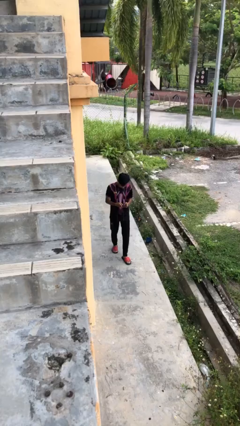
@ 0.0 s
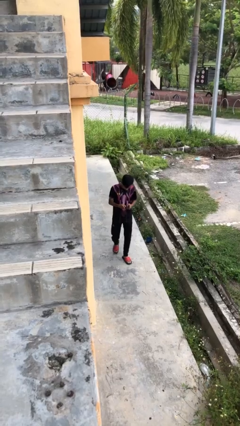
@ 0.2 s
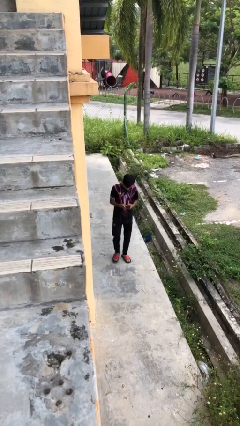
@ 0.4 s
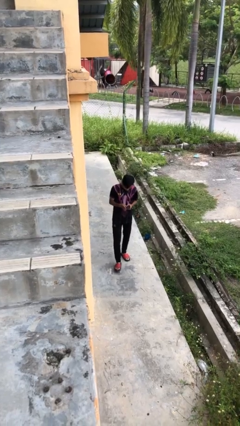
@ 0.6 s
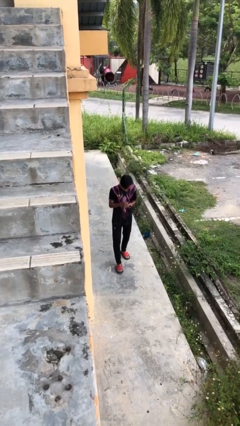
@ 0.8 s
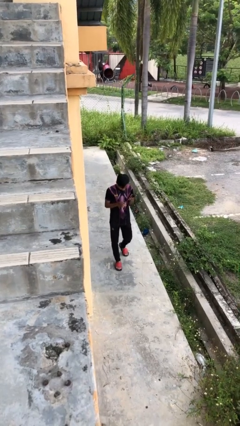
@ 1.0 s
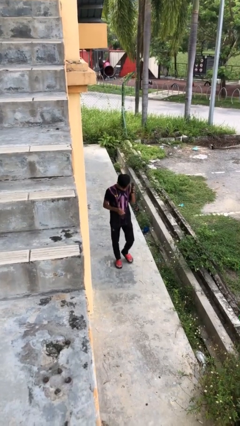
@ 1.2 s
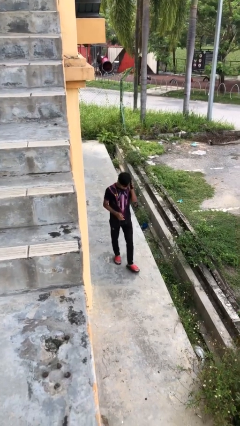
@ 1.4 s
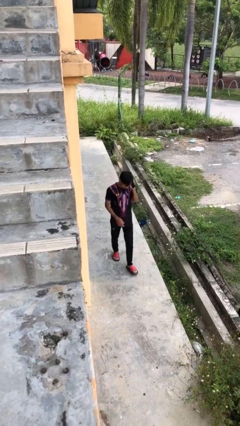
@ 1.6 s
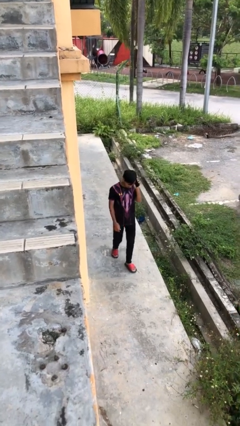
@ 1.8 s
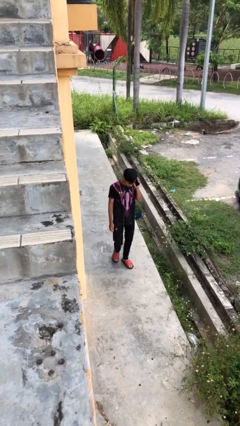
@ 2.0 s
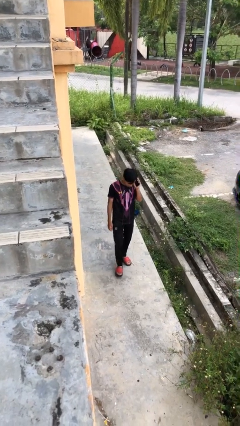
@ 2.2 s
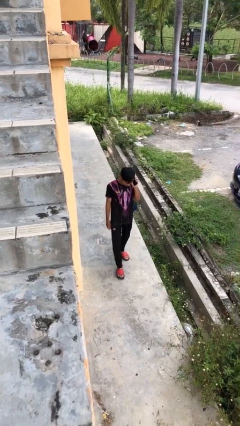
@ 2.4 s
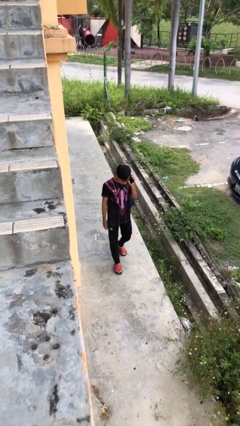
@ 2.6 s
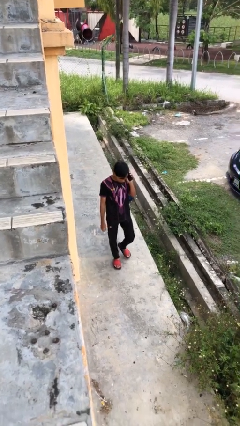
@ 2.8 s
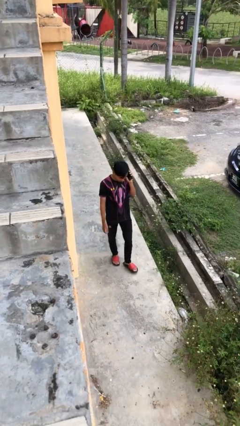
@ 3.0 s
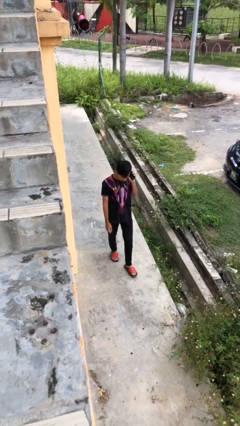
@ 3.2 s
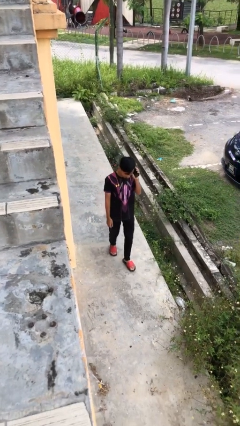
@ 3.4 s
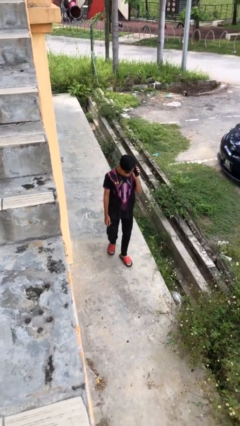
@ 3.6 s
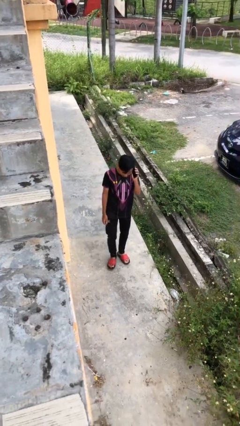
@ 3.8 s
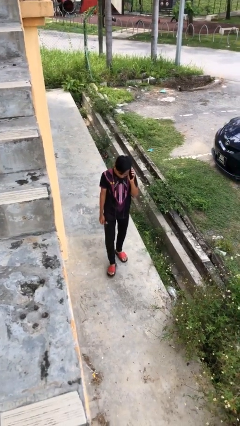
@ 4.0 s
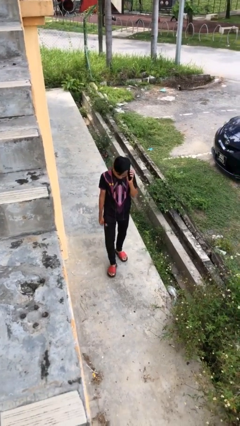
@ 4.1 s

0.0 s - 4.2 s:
person talks on phone

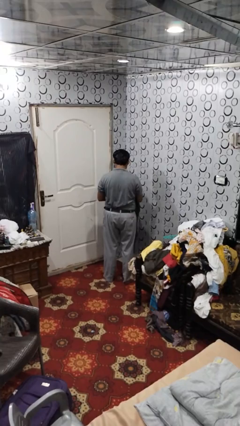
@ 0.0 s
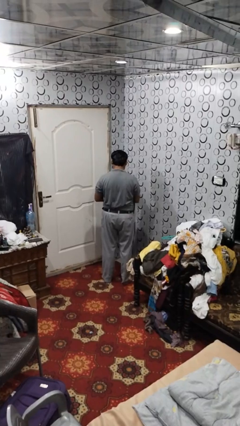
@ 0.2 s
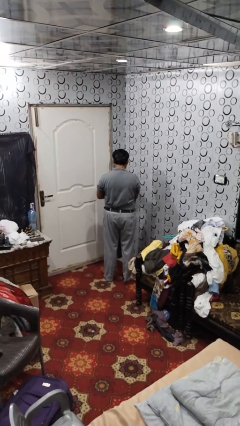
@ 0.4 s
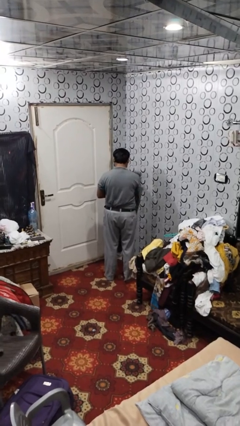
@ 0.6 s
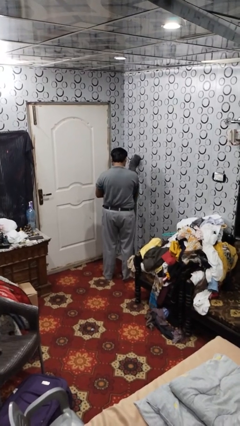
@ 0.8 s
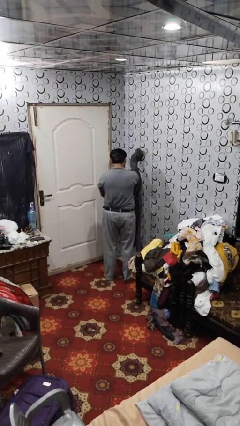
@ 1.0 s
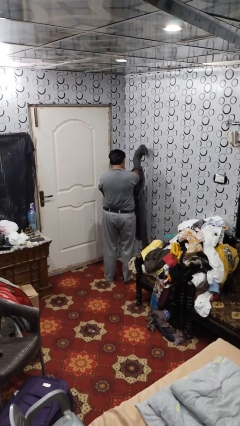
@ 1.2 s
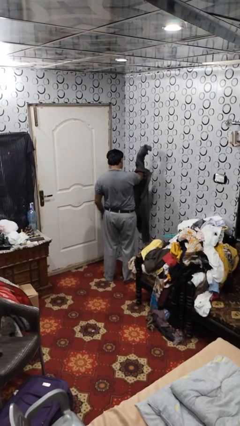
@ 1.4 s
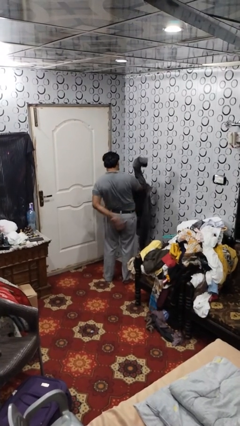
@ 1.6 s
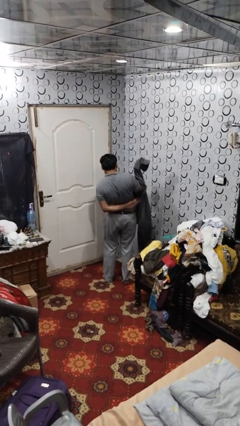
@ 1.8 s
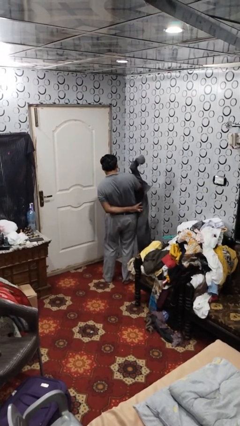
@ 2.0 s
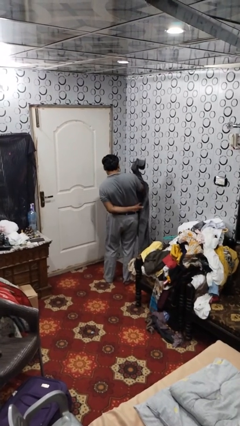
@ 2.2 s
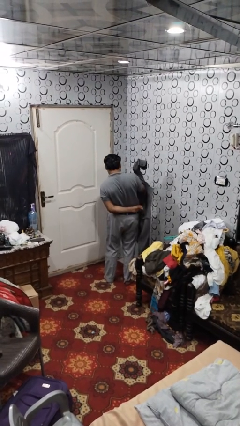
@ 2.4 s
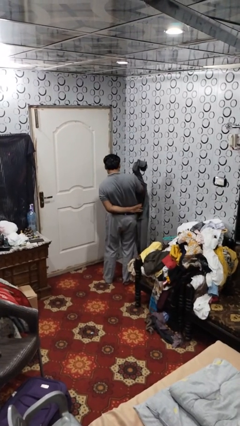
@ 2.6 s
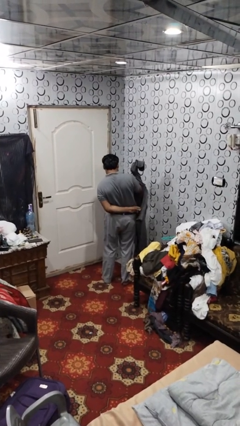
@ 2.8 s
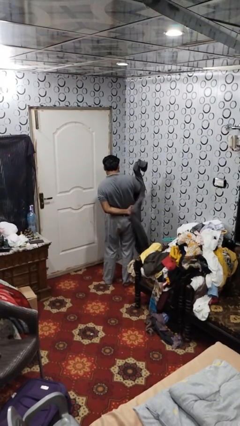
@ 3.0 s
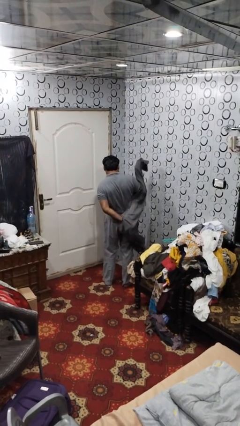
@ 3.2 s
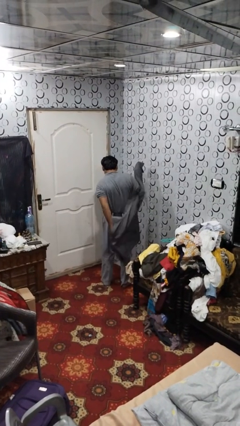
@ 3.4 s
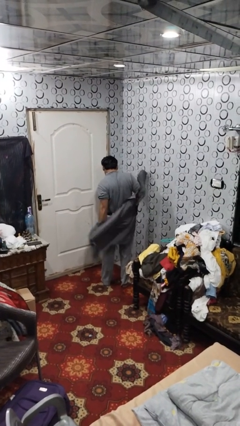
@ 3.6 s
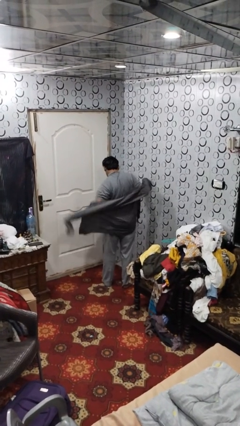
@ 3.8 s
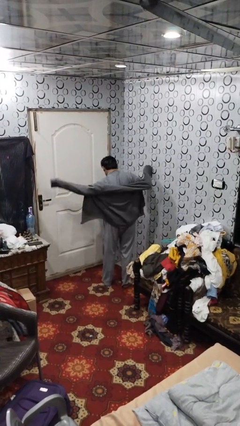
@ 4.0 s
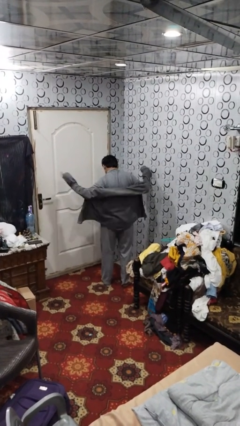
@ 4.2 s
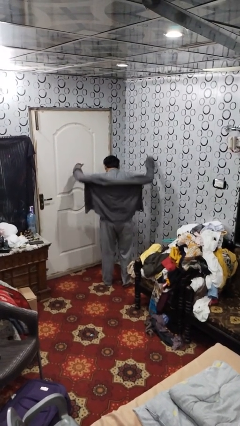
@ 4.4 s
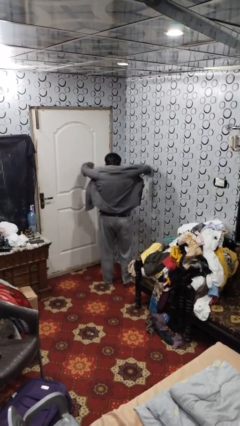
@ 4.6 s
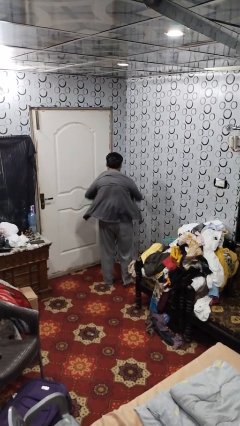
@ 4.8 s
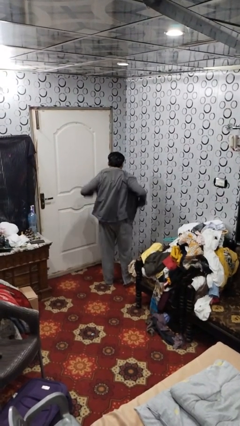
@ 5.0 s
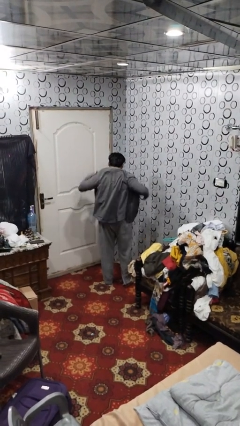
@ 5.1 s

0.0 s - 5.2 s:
person puts on shirt

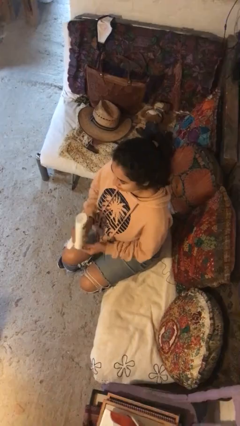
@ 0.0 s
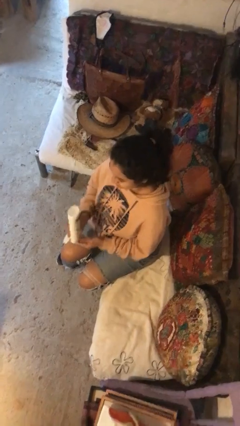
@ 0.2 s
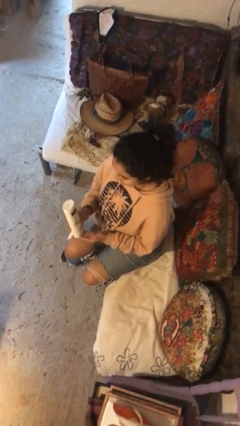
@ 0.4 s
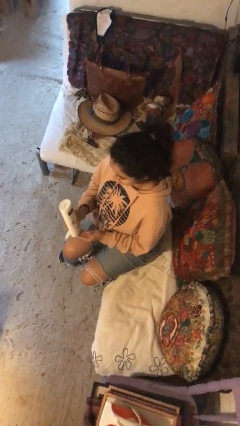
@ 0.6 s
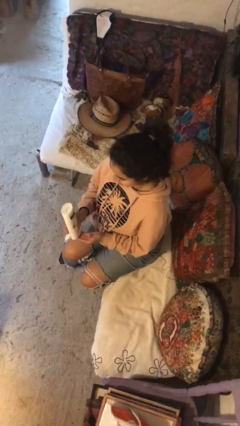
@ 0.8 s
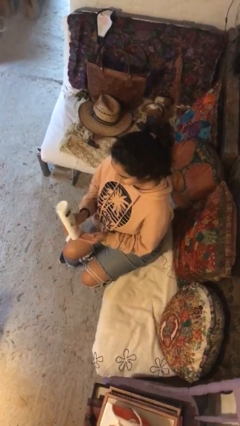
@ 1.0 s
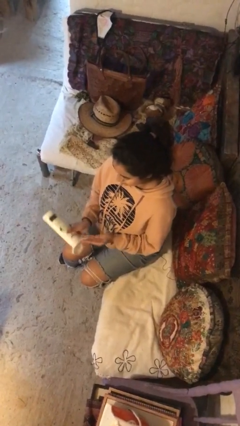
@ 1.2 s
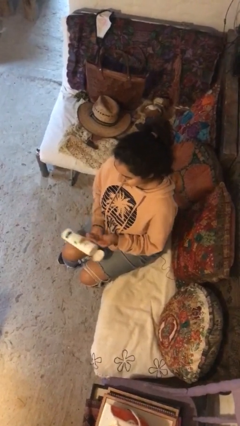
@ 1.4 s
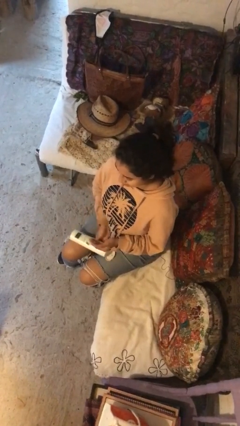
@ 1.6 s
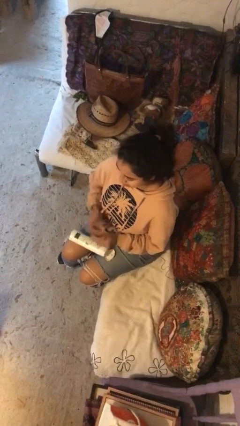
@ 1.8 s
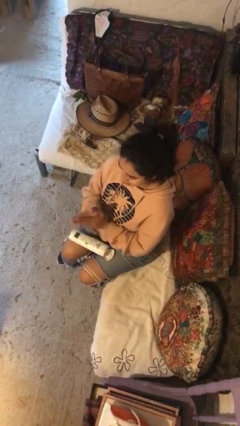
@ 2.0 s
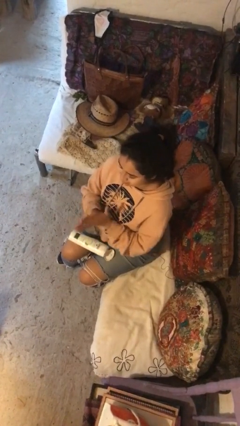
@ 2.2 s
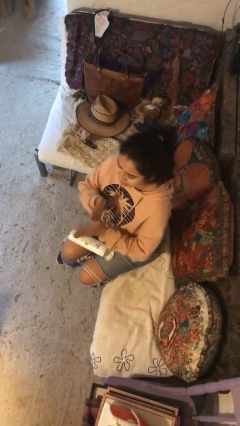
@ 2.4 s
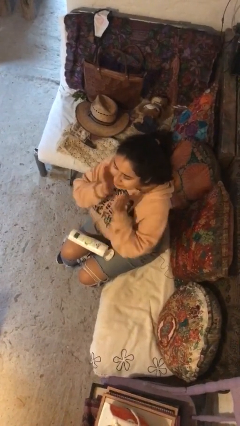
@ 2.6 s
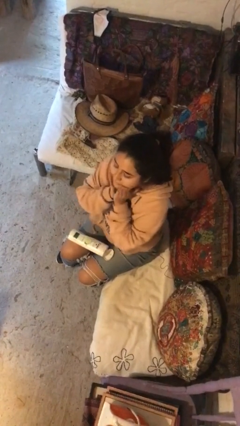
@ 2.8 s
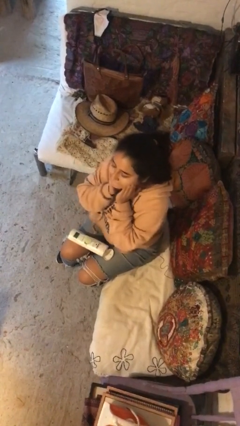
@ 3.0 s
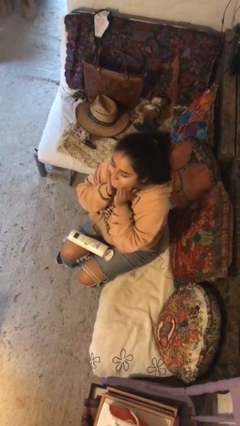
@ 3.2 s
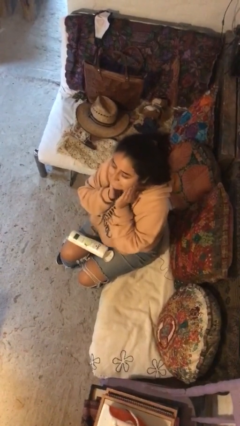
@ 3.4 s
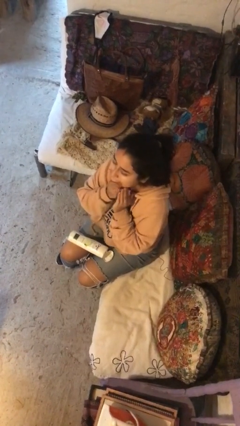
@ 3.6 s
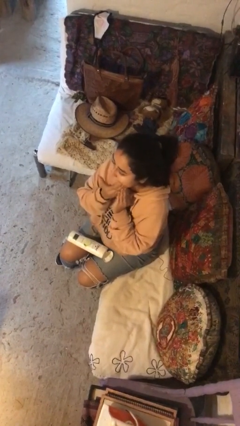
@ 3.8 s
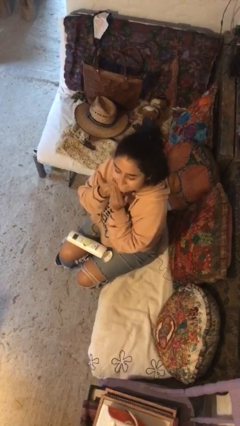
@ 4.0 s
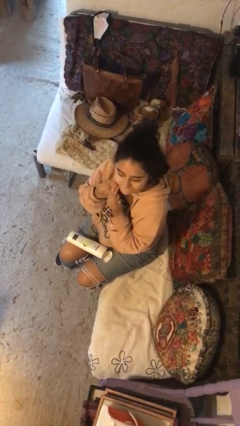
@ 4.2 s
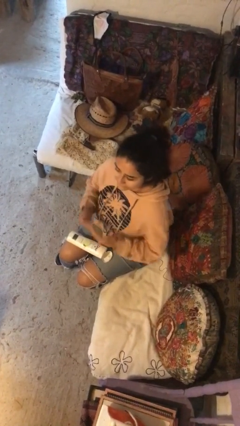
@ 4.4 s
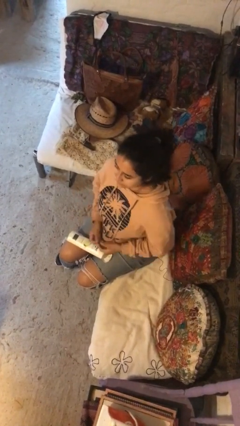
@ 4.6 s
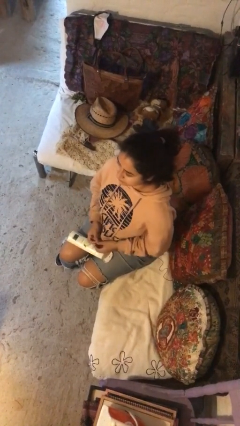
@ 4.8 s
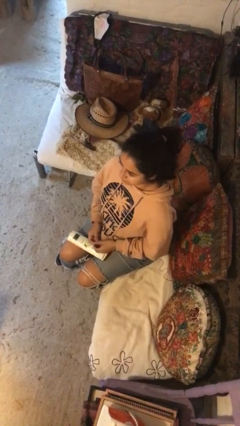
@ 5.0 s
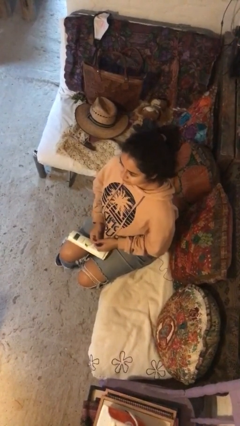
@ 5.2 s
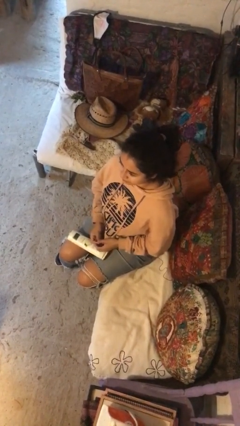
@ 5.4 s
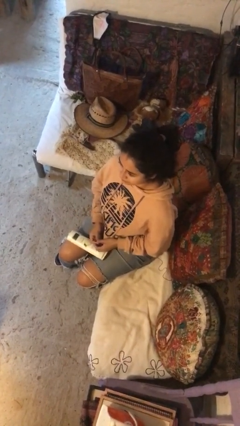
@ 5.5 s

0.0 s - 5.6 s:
person applies facial moisturizer

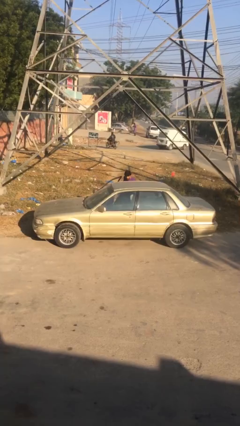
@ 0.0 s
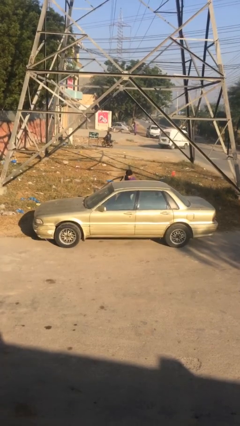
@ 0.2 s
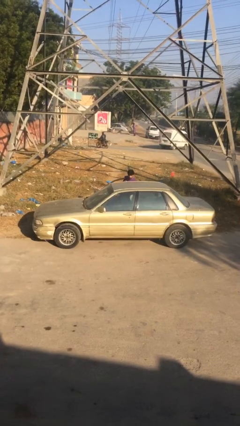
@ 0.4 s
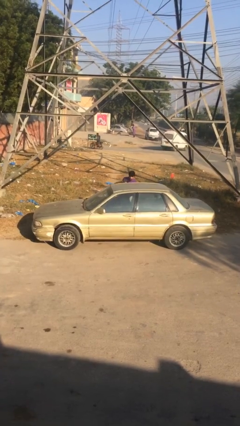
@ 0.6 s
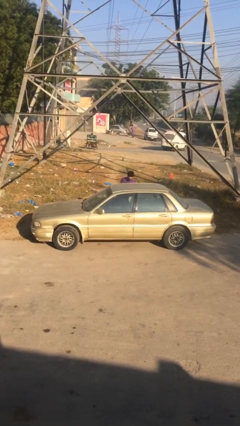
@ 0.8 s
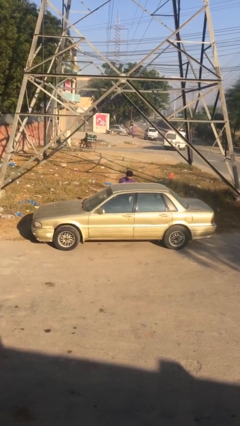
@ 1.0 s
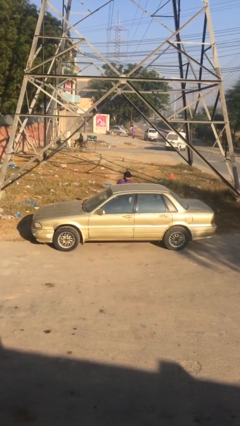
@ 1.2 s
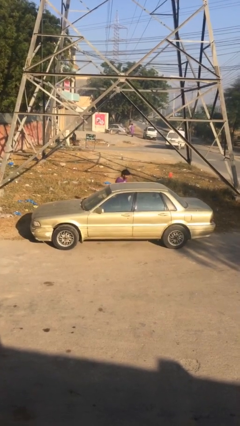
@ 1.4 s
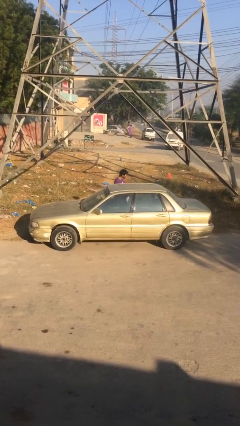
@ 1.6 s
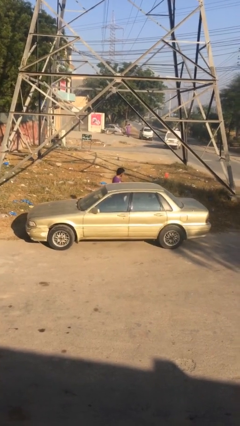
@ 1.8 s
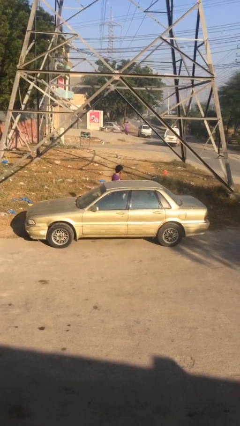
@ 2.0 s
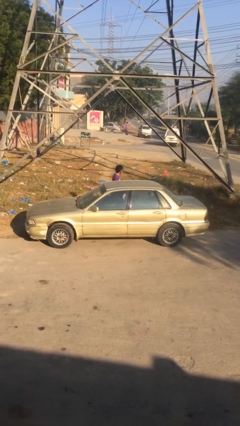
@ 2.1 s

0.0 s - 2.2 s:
person closes car door

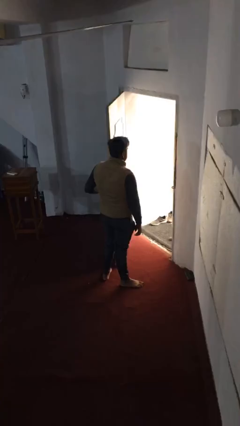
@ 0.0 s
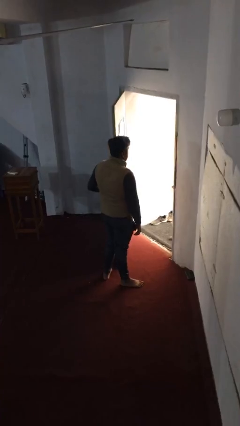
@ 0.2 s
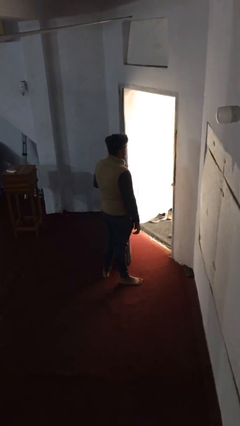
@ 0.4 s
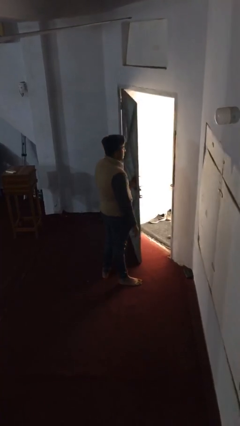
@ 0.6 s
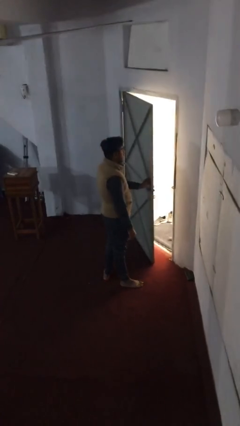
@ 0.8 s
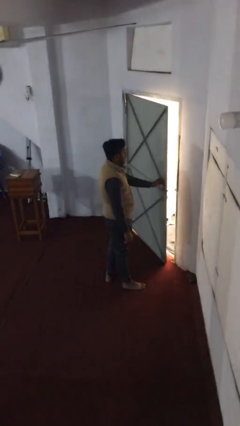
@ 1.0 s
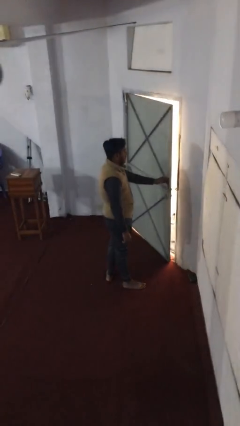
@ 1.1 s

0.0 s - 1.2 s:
person closes facility door
